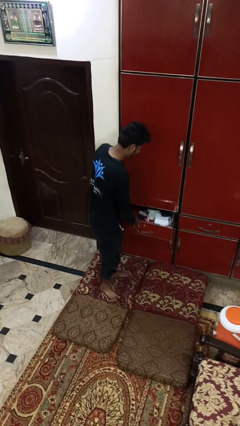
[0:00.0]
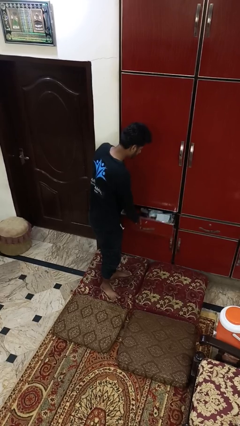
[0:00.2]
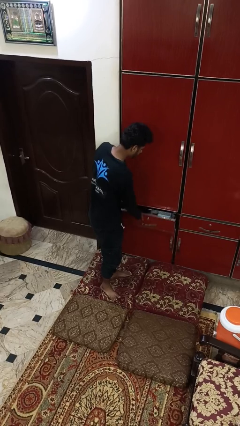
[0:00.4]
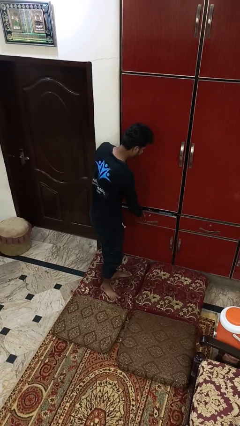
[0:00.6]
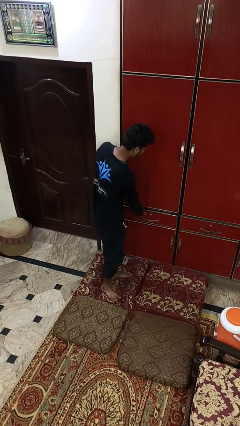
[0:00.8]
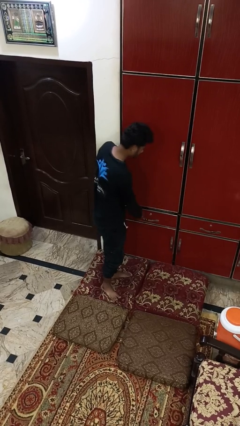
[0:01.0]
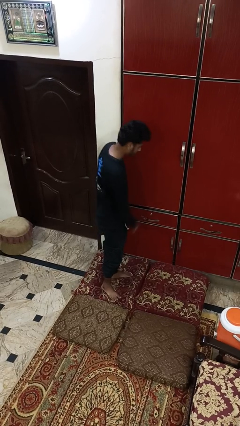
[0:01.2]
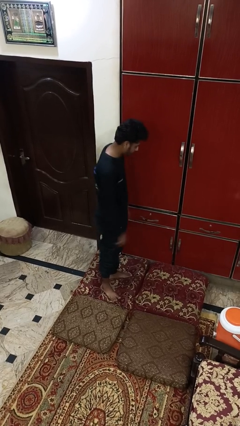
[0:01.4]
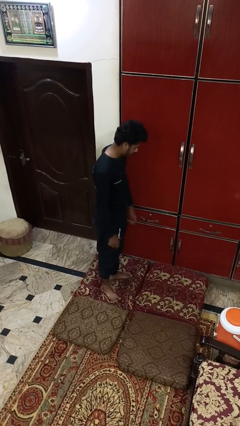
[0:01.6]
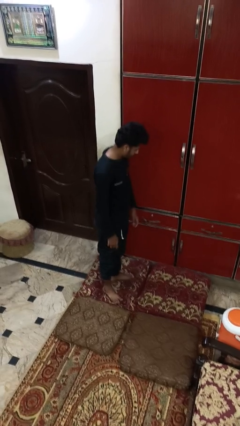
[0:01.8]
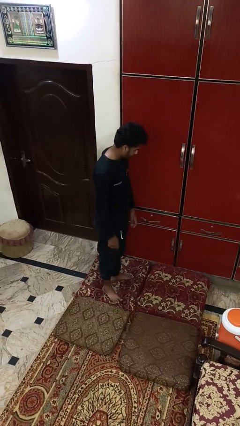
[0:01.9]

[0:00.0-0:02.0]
person closes dresser drawer

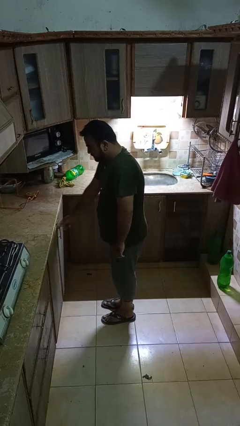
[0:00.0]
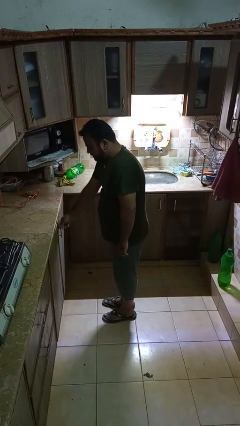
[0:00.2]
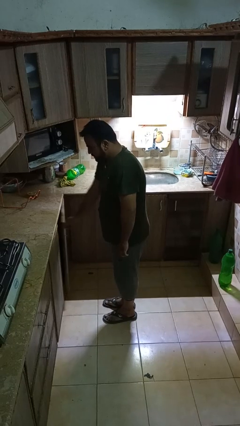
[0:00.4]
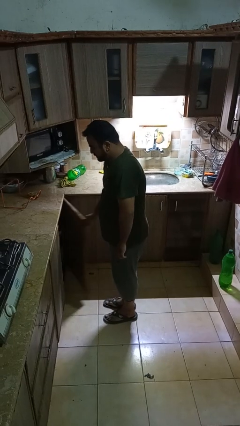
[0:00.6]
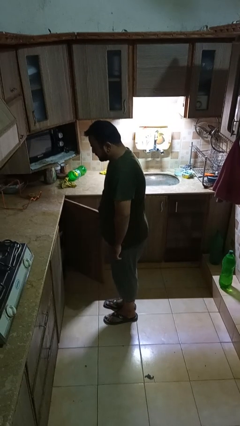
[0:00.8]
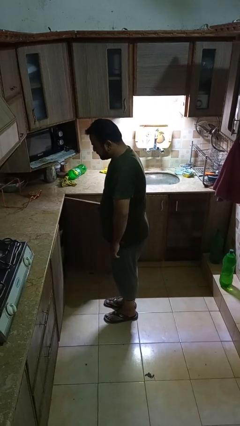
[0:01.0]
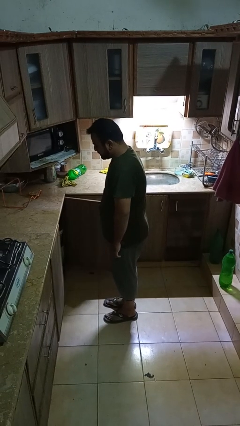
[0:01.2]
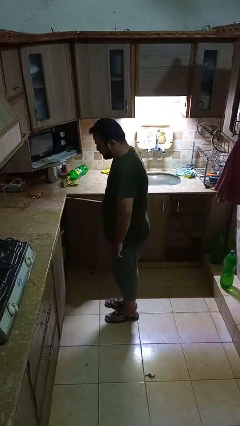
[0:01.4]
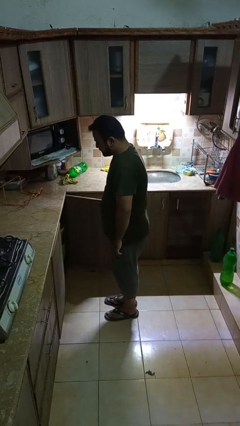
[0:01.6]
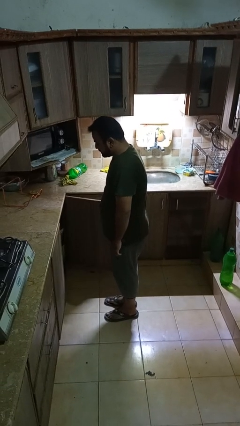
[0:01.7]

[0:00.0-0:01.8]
person opens cabinet

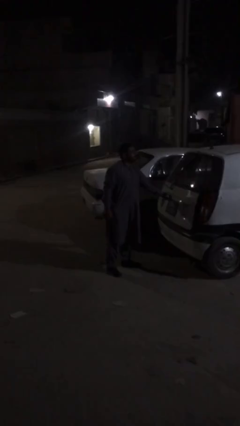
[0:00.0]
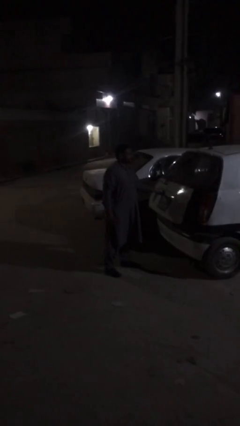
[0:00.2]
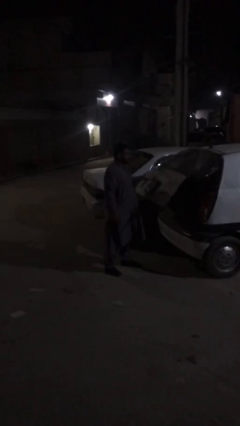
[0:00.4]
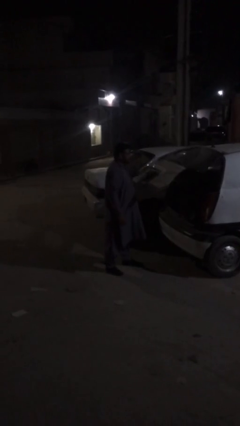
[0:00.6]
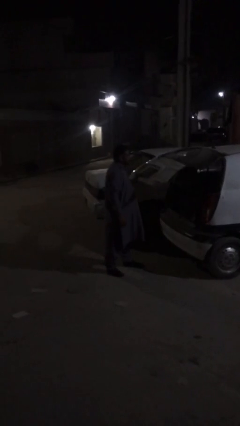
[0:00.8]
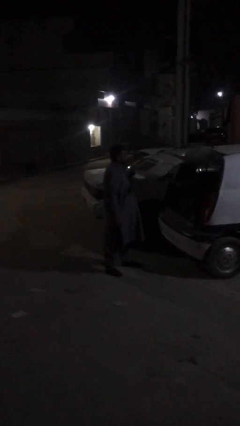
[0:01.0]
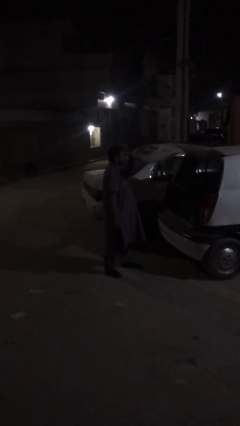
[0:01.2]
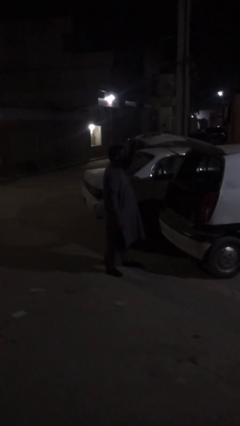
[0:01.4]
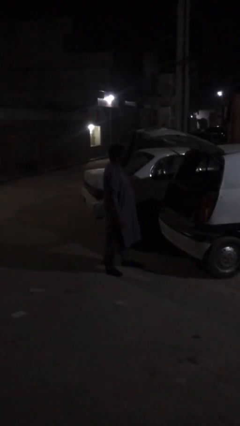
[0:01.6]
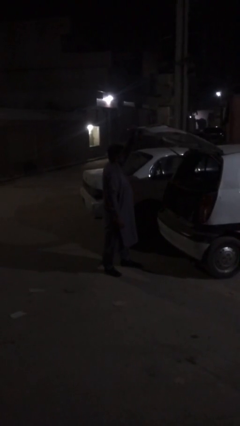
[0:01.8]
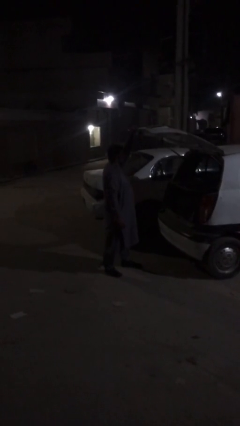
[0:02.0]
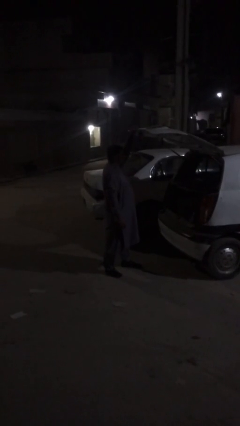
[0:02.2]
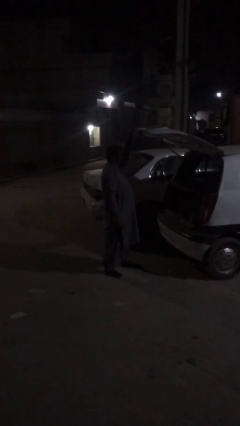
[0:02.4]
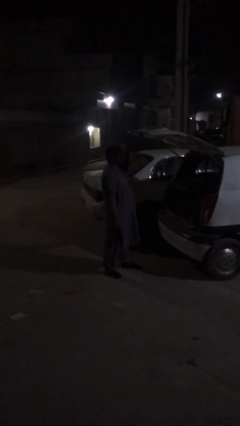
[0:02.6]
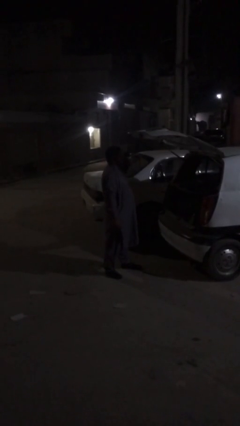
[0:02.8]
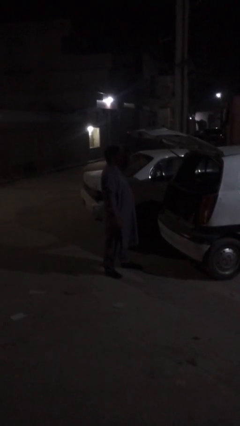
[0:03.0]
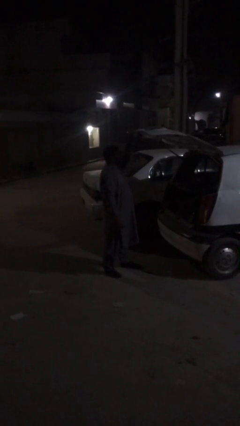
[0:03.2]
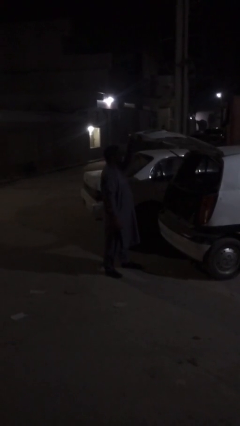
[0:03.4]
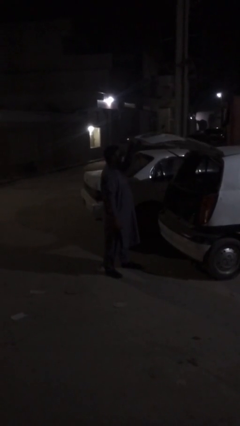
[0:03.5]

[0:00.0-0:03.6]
person opens car trunk

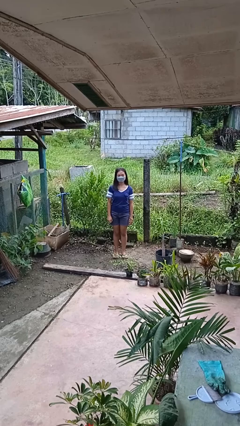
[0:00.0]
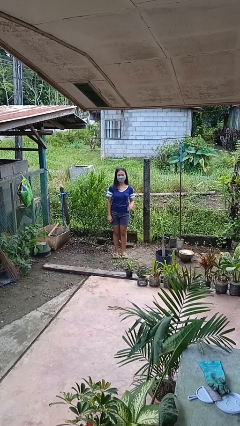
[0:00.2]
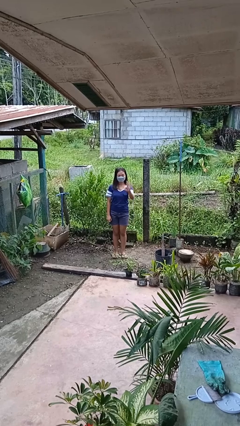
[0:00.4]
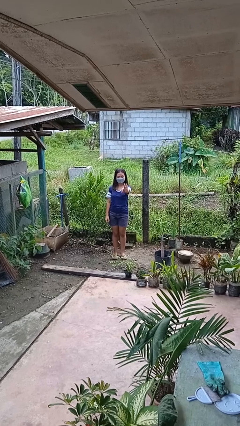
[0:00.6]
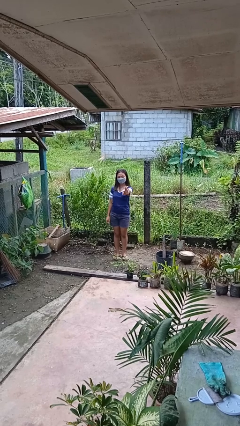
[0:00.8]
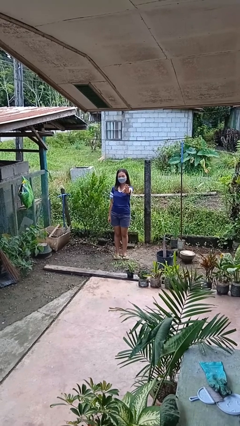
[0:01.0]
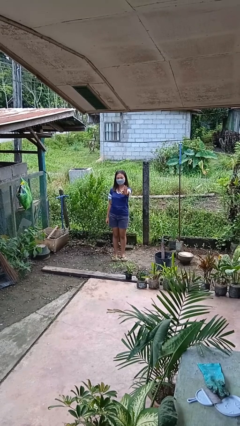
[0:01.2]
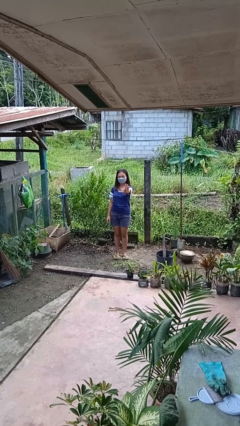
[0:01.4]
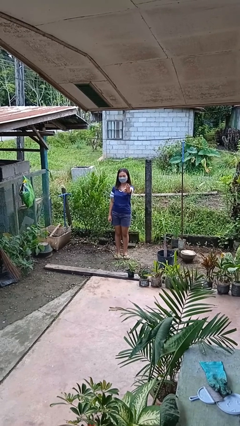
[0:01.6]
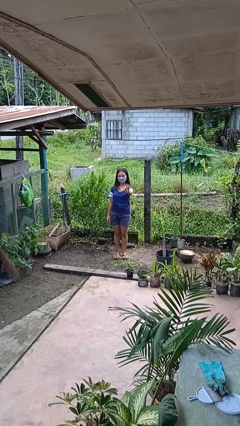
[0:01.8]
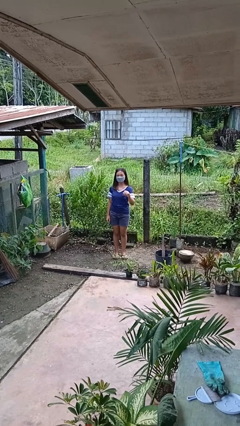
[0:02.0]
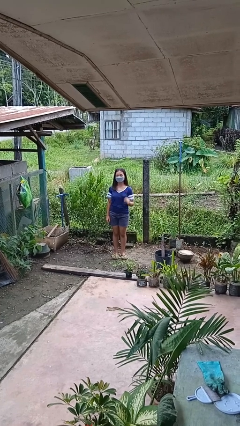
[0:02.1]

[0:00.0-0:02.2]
person gestures number three

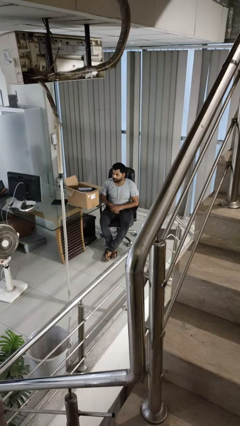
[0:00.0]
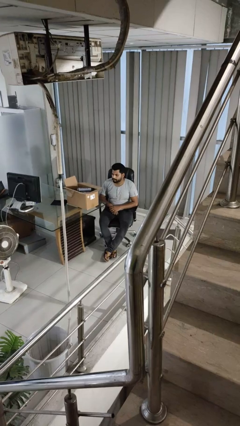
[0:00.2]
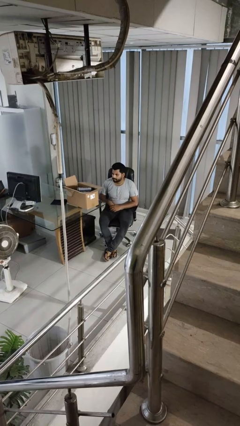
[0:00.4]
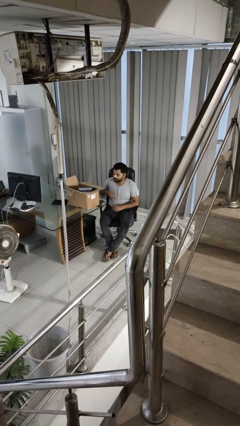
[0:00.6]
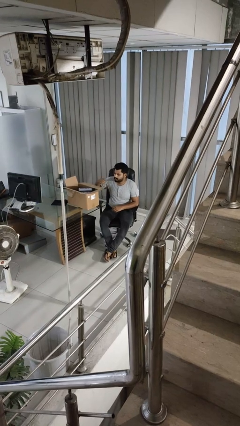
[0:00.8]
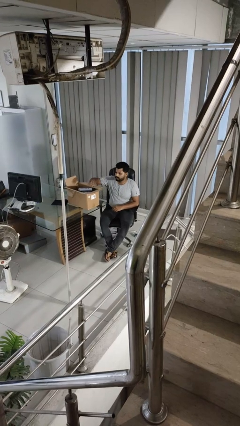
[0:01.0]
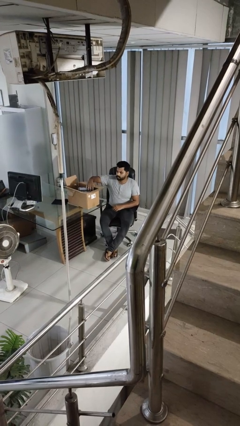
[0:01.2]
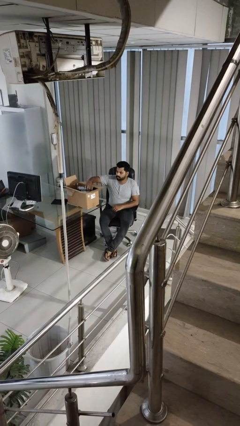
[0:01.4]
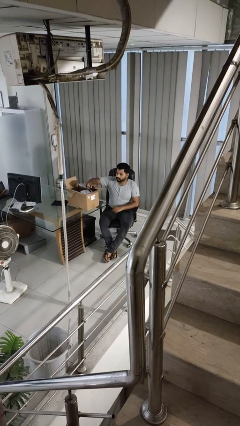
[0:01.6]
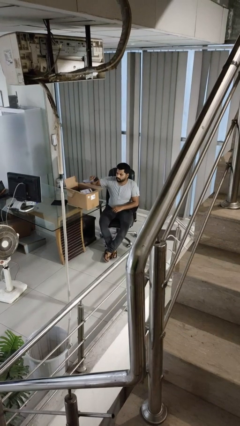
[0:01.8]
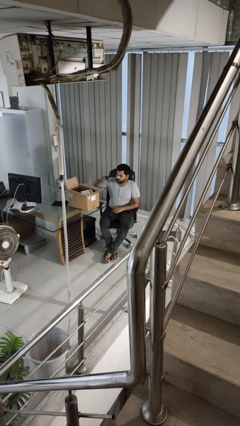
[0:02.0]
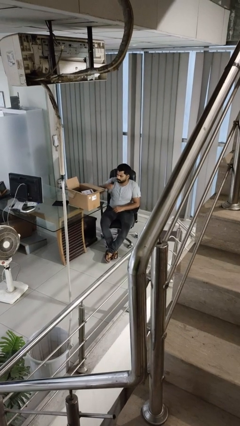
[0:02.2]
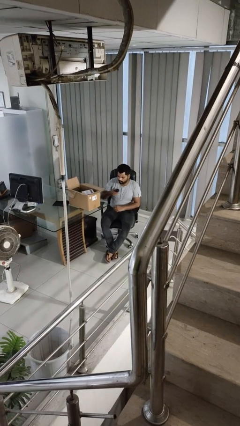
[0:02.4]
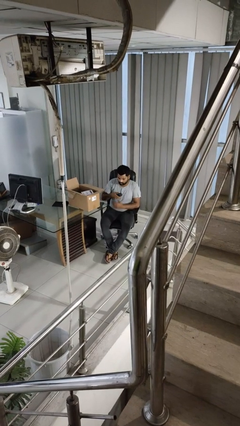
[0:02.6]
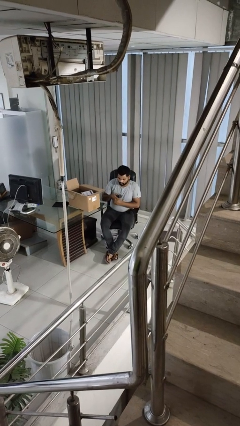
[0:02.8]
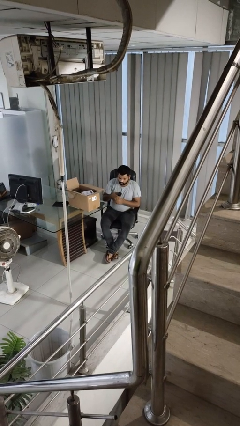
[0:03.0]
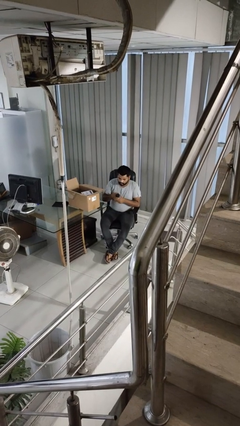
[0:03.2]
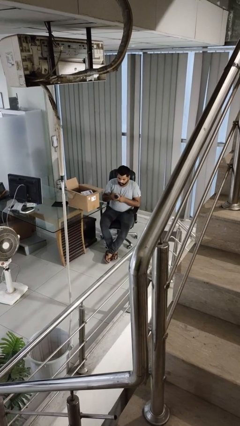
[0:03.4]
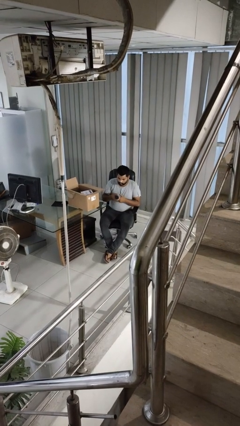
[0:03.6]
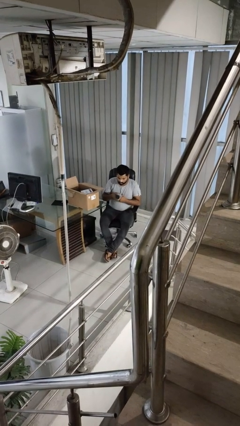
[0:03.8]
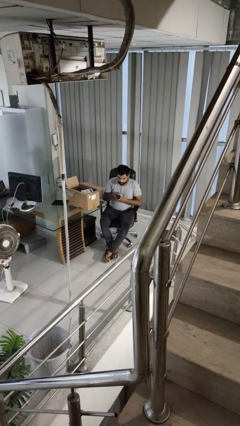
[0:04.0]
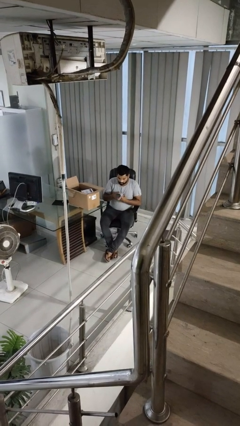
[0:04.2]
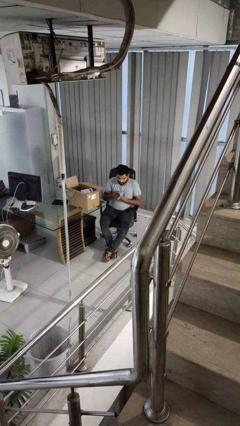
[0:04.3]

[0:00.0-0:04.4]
person takes object from box

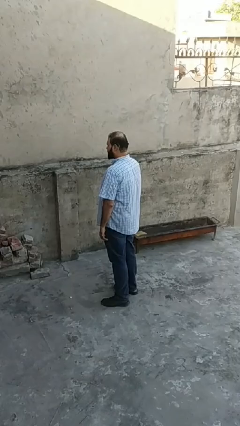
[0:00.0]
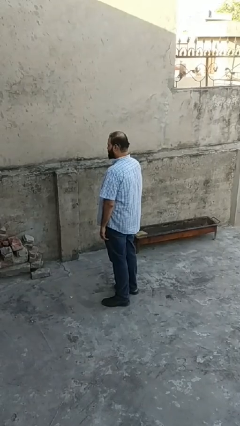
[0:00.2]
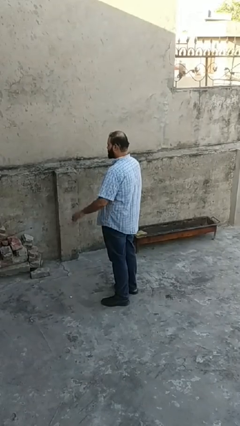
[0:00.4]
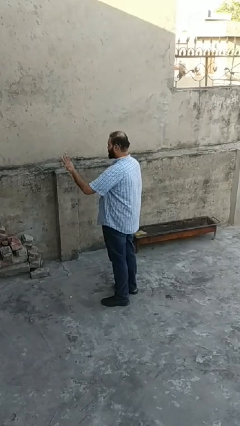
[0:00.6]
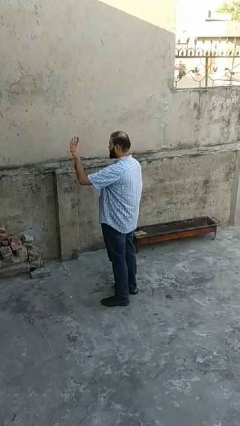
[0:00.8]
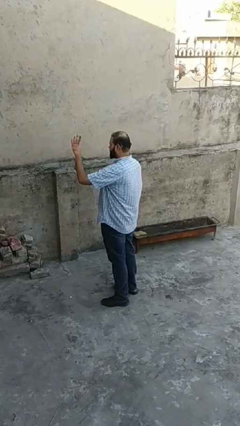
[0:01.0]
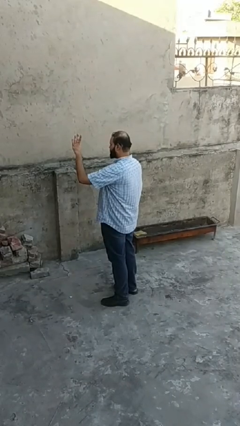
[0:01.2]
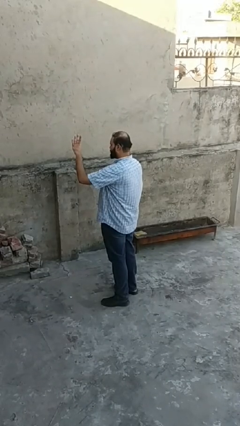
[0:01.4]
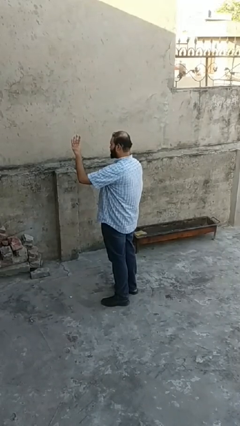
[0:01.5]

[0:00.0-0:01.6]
person gestures number four

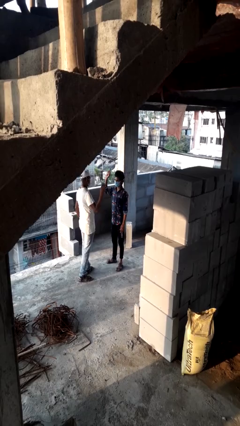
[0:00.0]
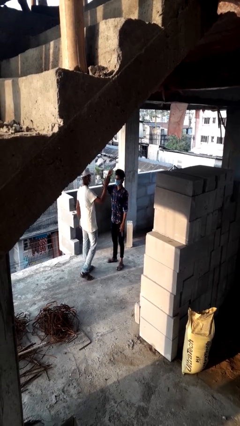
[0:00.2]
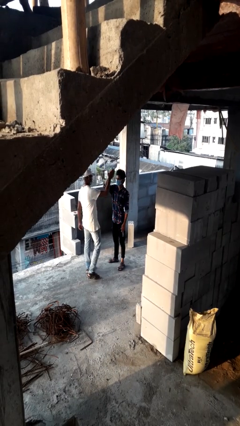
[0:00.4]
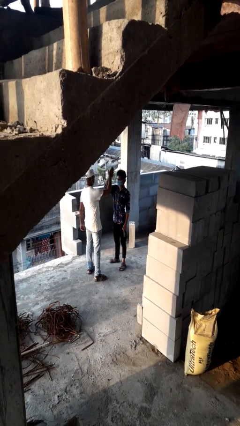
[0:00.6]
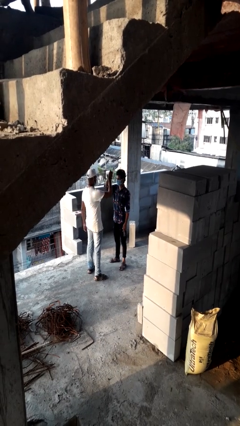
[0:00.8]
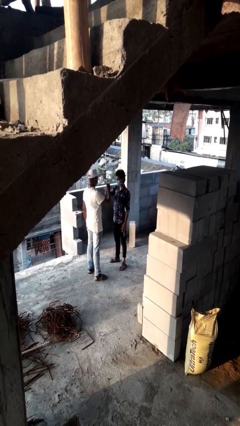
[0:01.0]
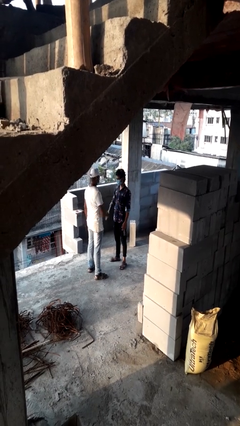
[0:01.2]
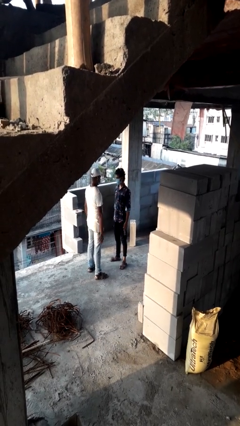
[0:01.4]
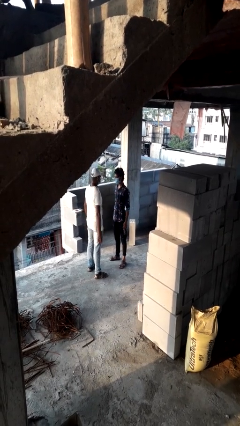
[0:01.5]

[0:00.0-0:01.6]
person highfives hand
